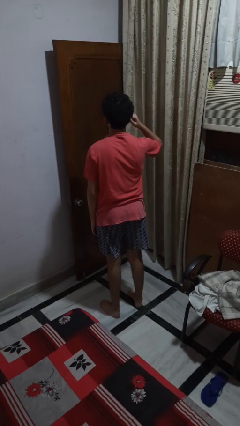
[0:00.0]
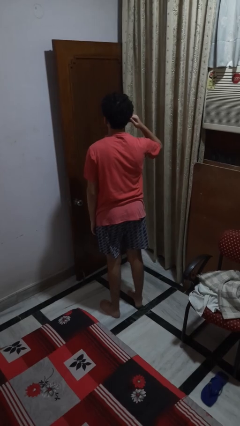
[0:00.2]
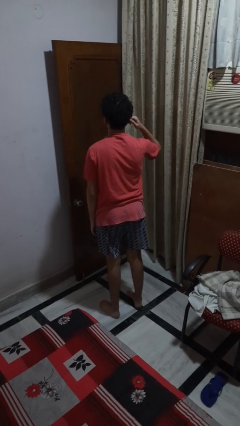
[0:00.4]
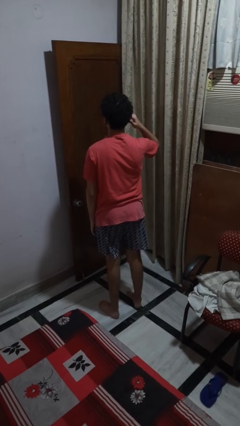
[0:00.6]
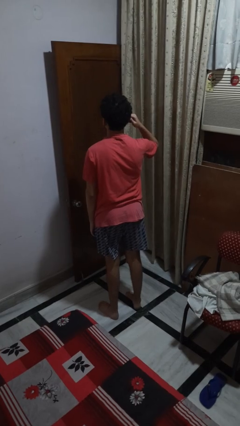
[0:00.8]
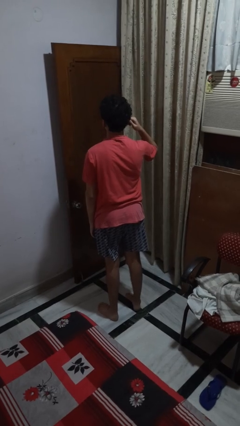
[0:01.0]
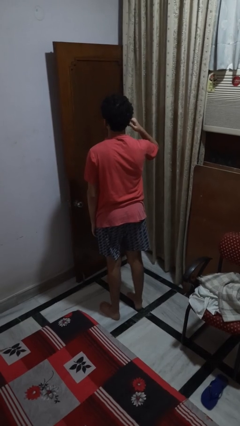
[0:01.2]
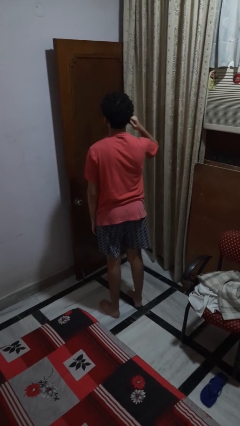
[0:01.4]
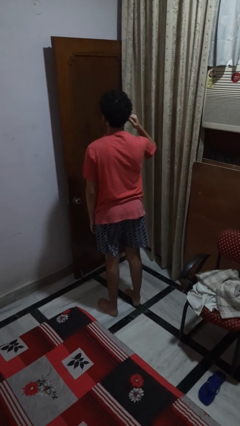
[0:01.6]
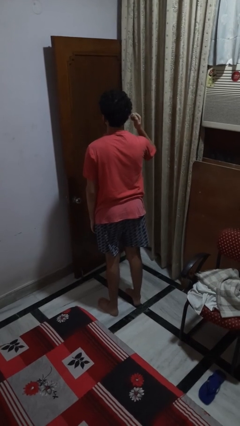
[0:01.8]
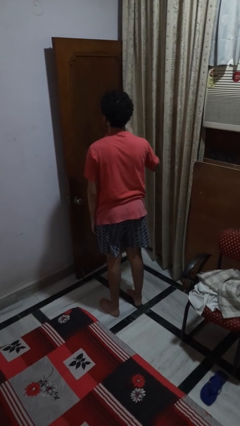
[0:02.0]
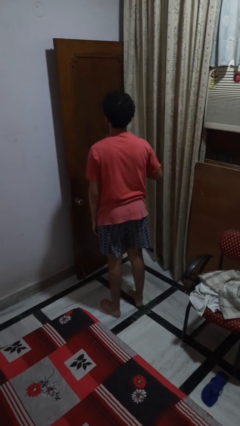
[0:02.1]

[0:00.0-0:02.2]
person touches earlobe

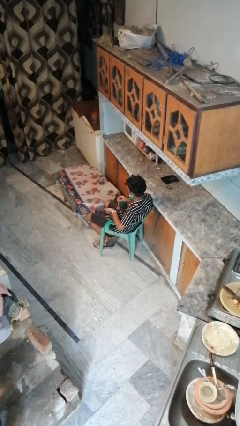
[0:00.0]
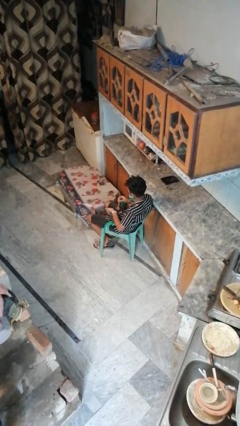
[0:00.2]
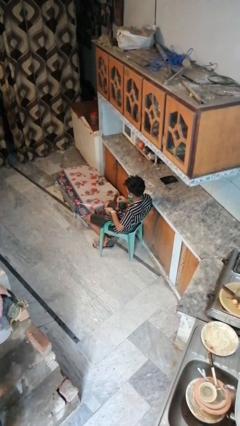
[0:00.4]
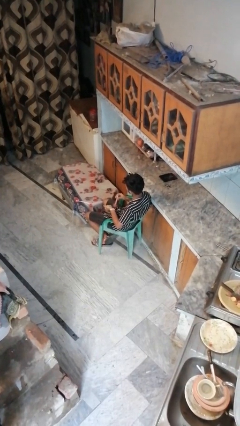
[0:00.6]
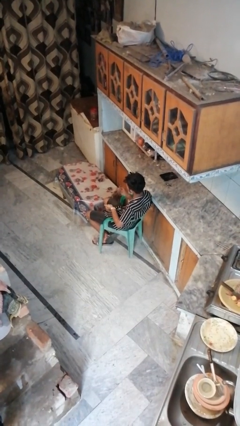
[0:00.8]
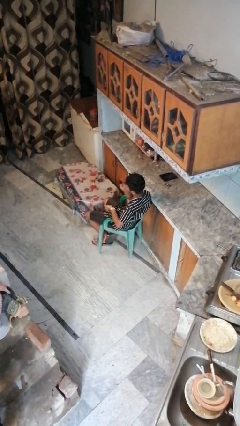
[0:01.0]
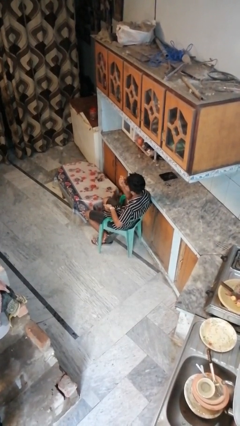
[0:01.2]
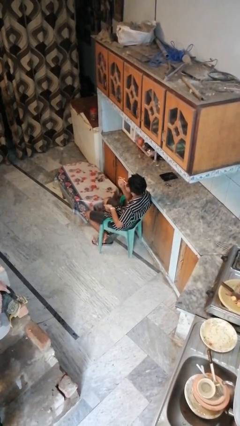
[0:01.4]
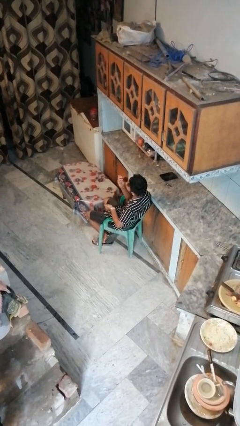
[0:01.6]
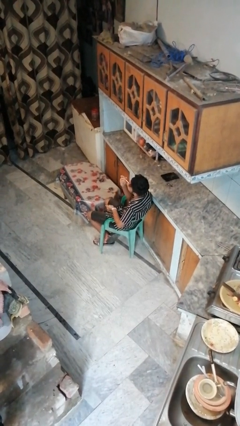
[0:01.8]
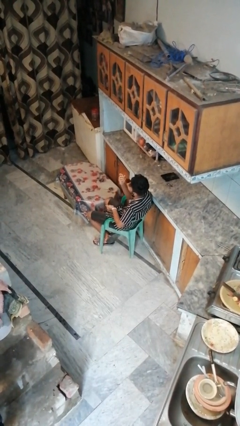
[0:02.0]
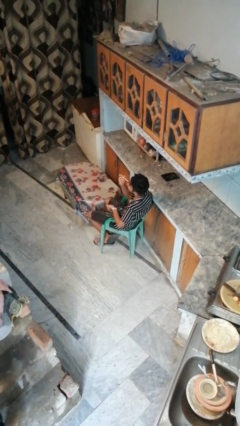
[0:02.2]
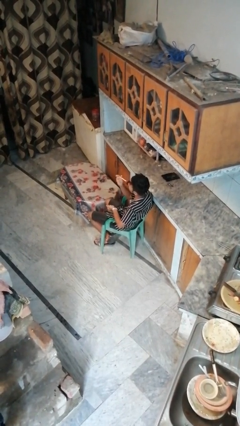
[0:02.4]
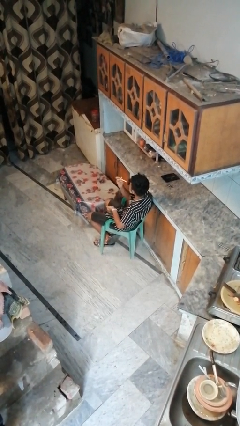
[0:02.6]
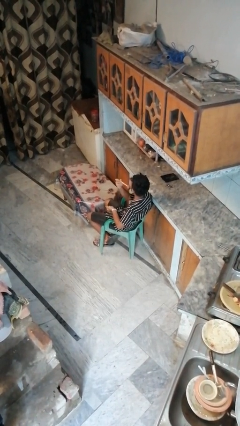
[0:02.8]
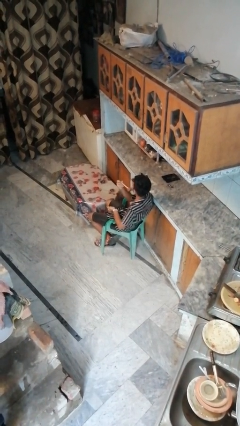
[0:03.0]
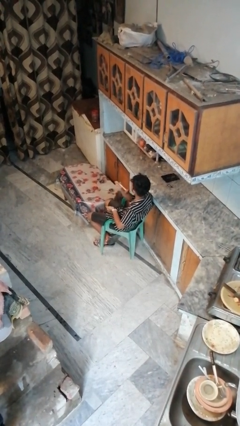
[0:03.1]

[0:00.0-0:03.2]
person applies foundation makeup

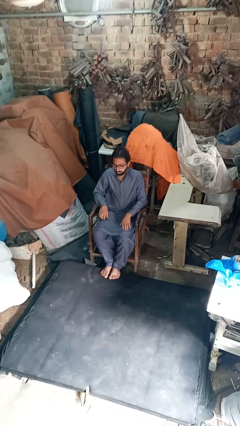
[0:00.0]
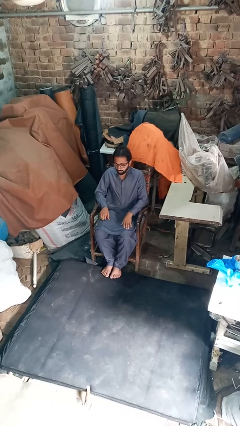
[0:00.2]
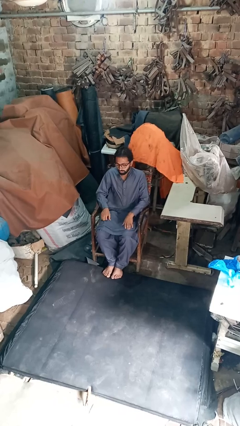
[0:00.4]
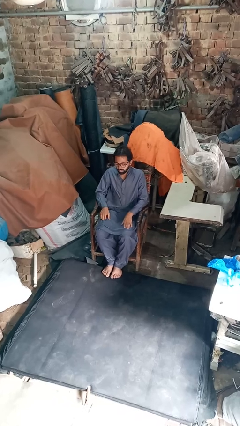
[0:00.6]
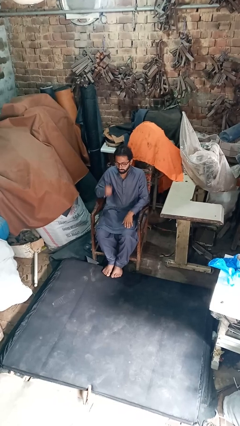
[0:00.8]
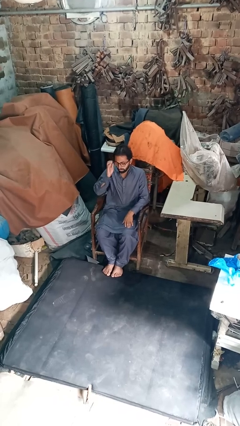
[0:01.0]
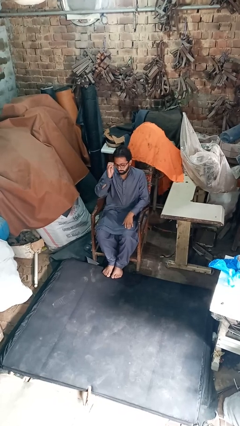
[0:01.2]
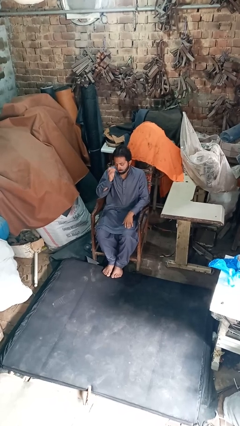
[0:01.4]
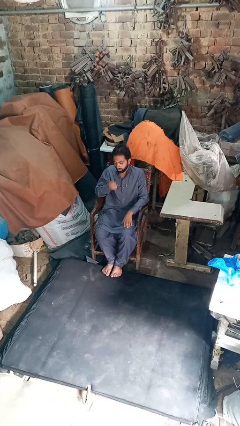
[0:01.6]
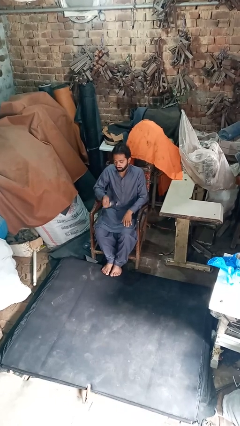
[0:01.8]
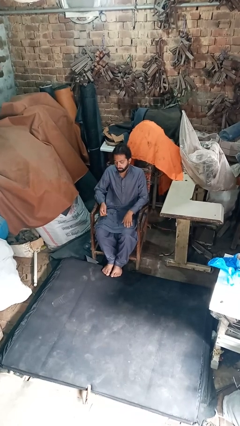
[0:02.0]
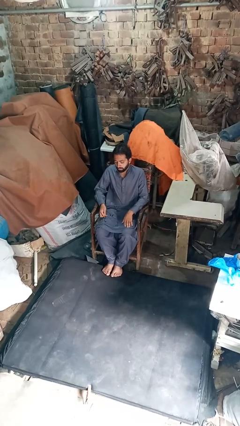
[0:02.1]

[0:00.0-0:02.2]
person takes off glasses

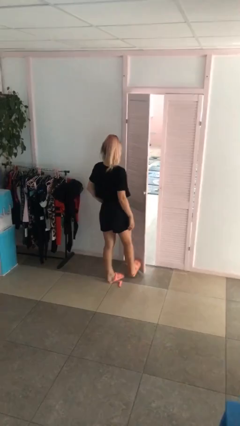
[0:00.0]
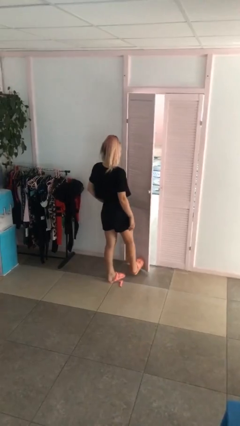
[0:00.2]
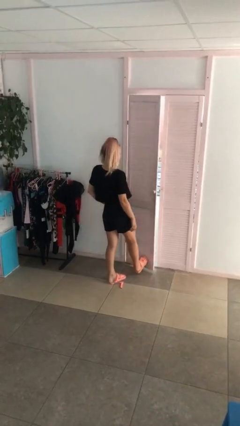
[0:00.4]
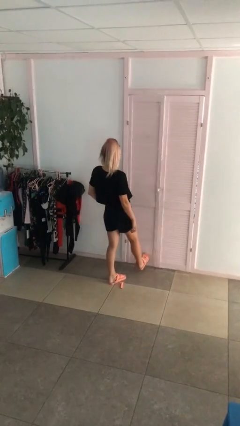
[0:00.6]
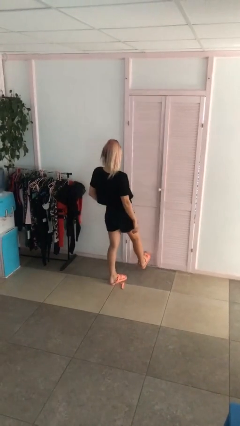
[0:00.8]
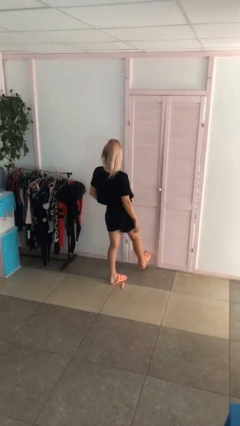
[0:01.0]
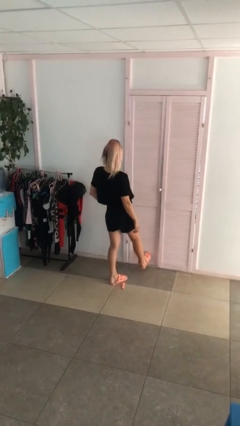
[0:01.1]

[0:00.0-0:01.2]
person closes door with foot

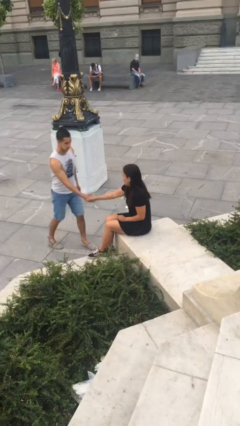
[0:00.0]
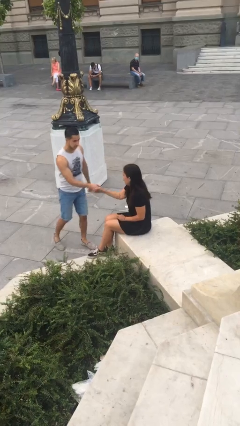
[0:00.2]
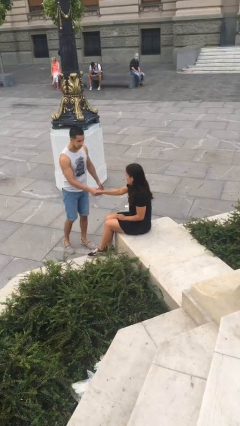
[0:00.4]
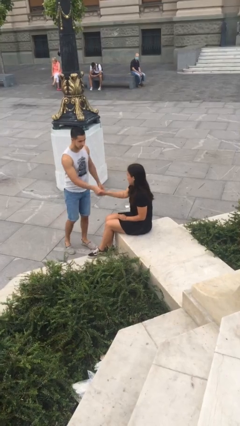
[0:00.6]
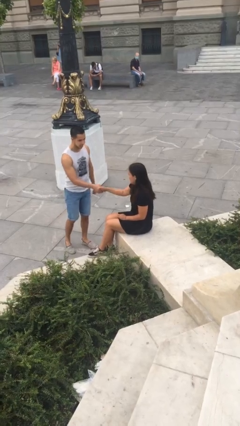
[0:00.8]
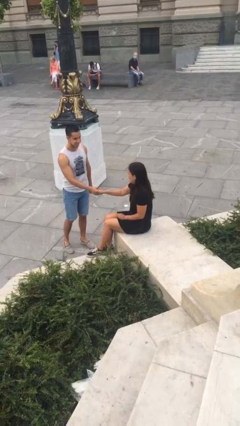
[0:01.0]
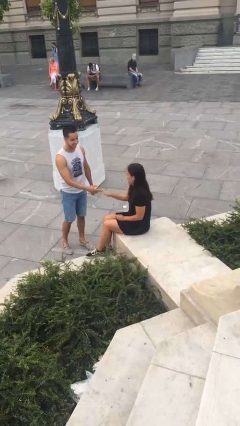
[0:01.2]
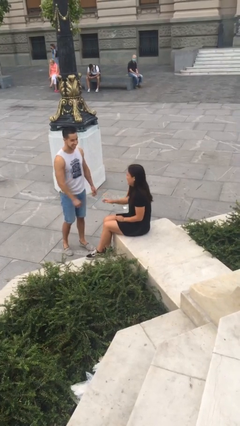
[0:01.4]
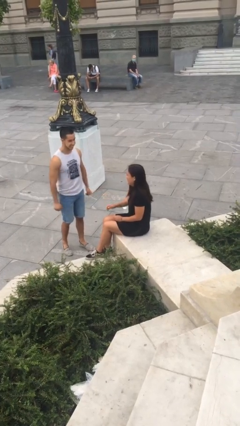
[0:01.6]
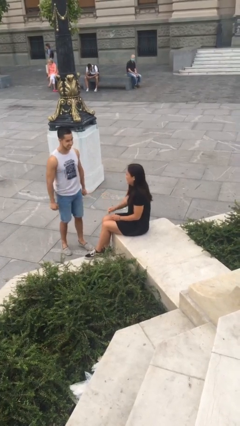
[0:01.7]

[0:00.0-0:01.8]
person shakes hand

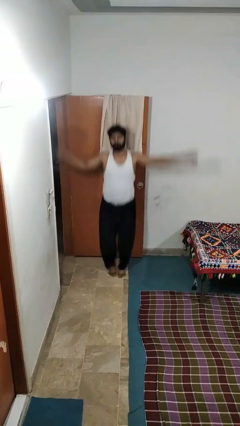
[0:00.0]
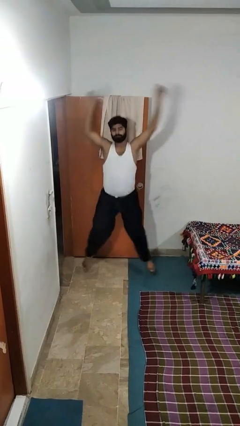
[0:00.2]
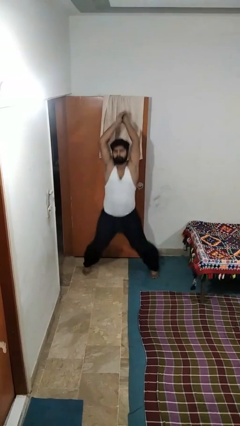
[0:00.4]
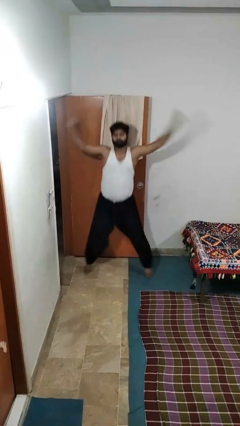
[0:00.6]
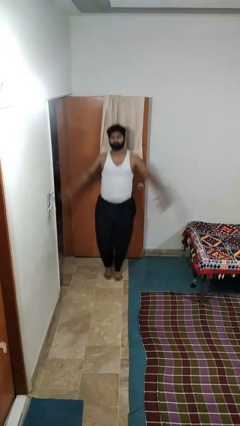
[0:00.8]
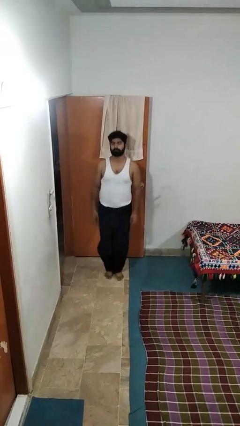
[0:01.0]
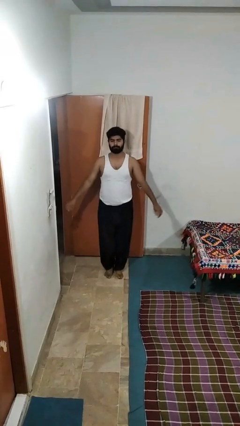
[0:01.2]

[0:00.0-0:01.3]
person exercises with jumping jacks

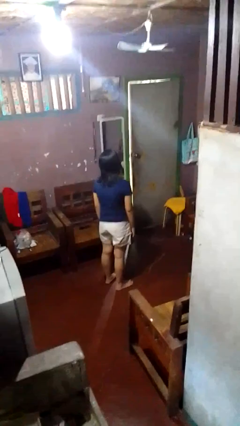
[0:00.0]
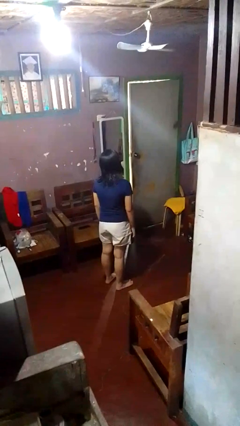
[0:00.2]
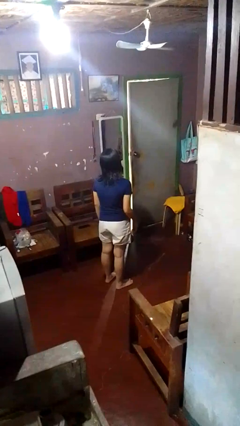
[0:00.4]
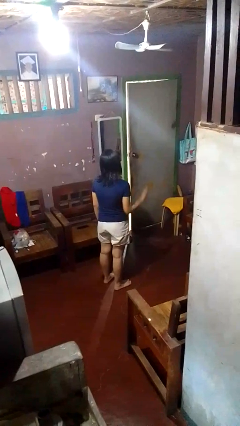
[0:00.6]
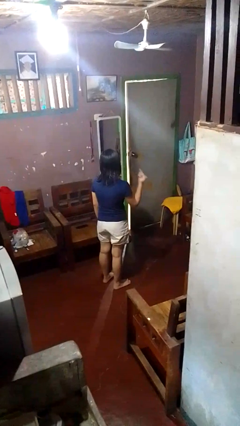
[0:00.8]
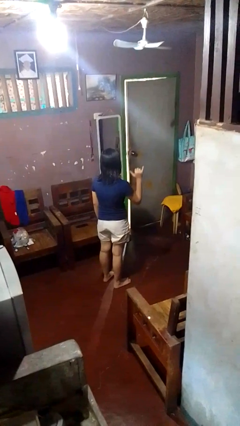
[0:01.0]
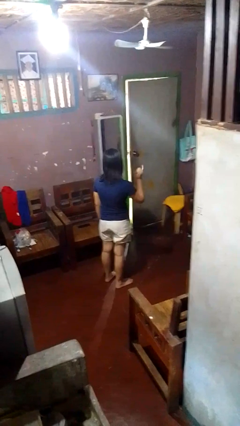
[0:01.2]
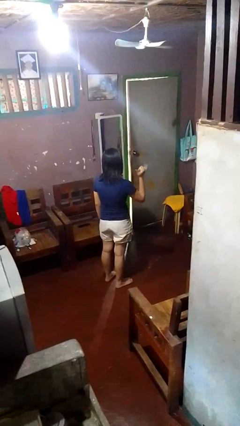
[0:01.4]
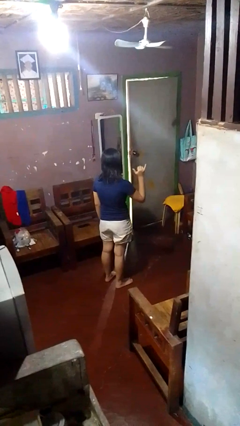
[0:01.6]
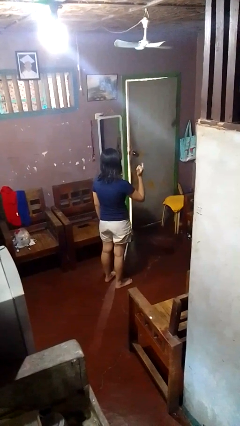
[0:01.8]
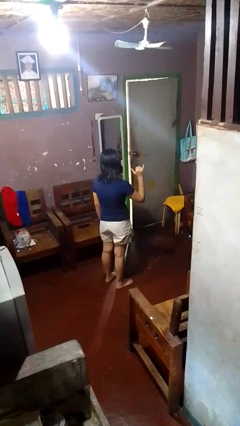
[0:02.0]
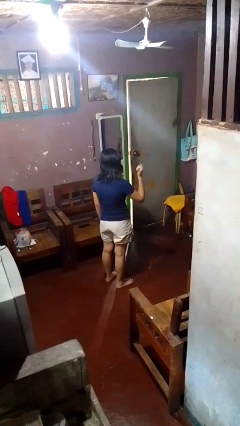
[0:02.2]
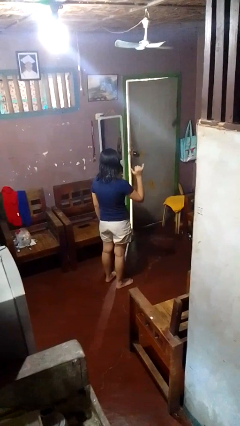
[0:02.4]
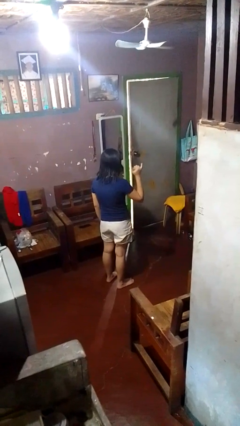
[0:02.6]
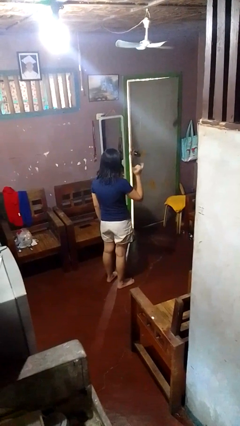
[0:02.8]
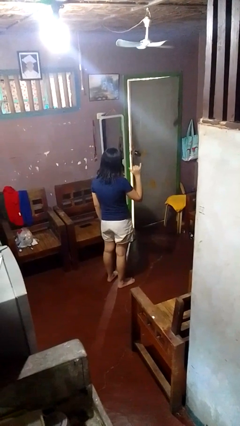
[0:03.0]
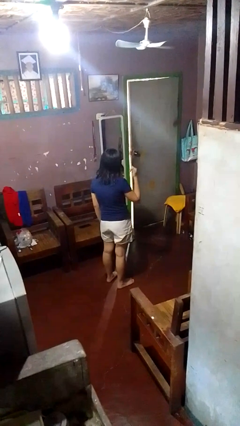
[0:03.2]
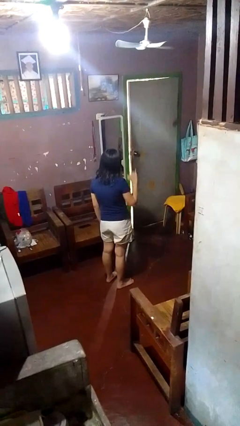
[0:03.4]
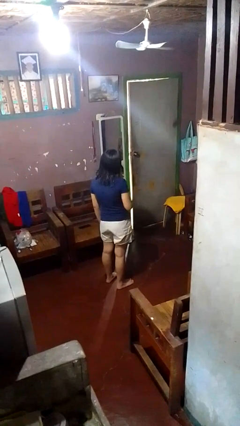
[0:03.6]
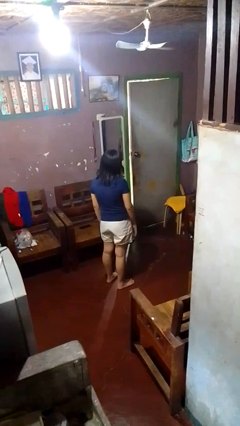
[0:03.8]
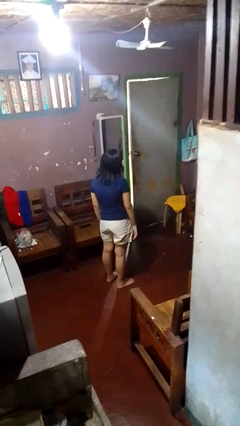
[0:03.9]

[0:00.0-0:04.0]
person gestures hang loose

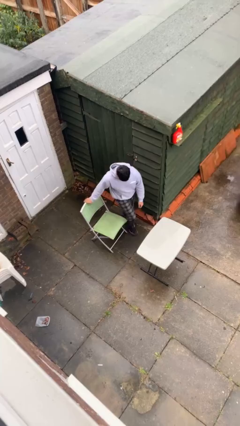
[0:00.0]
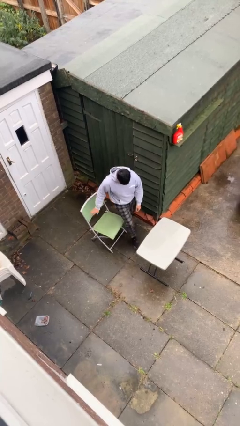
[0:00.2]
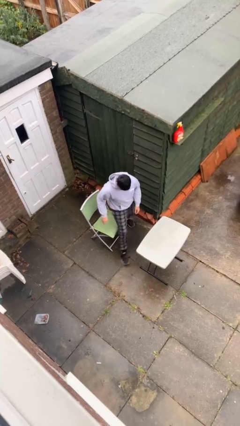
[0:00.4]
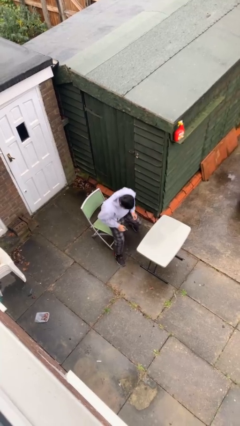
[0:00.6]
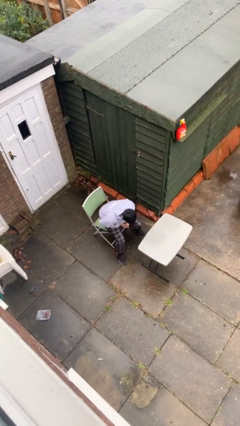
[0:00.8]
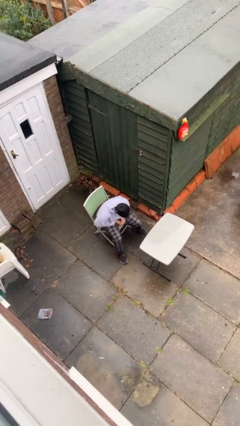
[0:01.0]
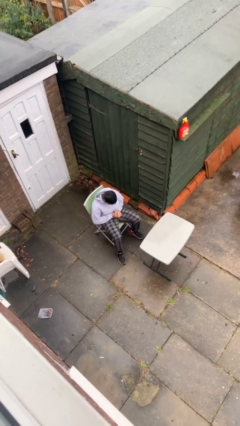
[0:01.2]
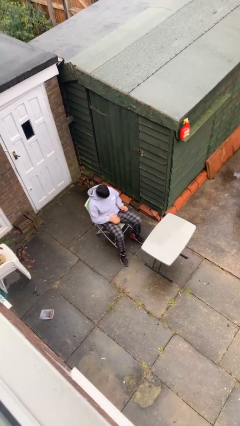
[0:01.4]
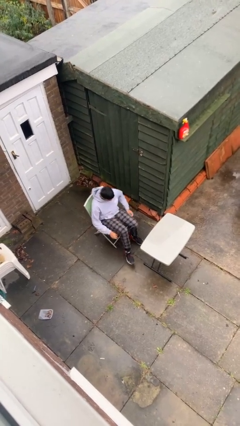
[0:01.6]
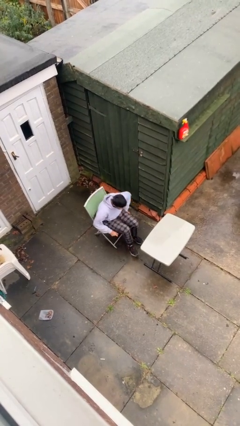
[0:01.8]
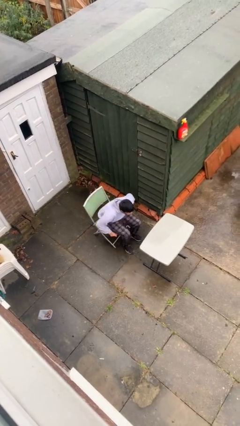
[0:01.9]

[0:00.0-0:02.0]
person sits down
